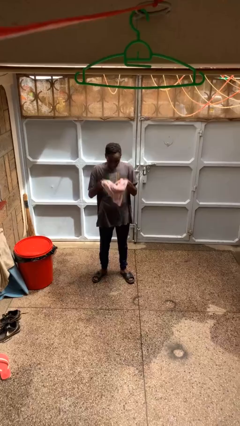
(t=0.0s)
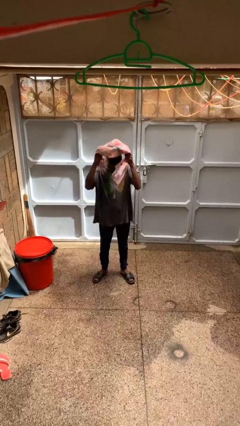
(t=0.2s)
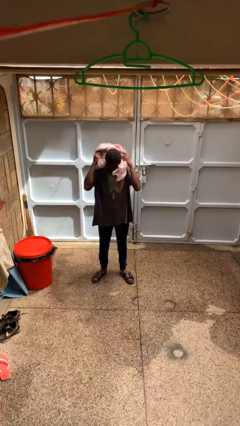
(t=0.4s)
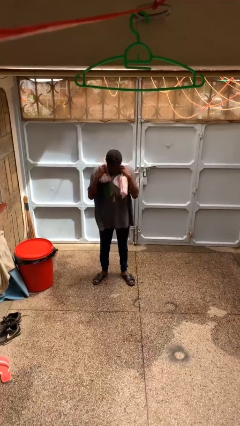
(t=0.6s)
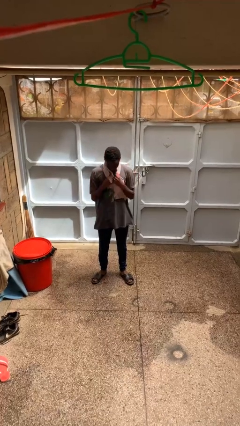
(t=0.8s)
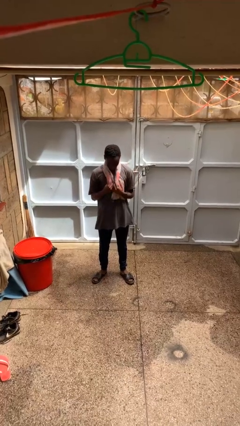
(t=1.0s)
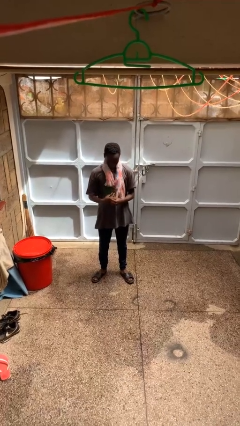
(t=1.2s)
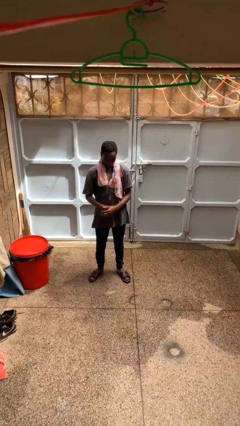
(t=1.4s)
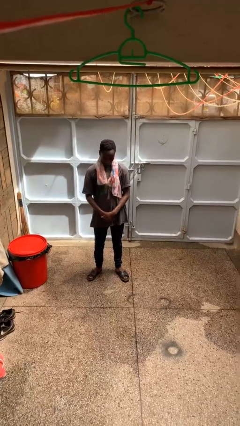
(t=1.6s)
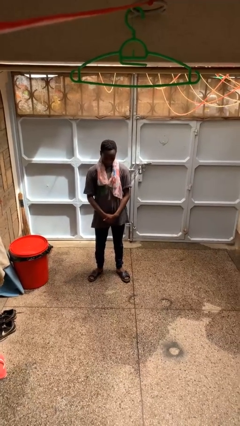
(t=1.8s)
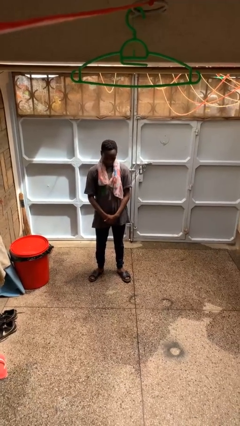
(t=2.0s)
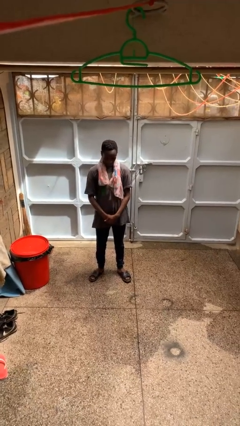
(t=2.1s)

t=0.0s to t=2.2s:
person puts on scarf

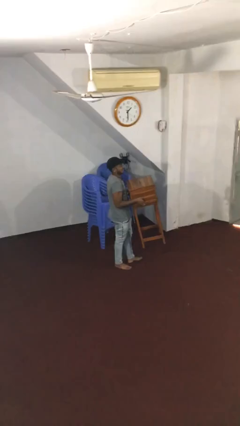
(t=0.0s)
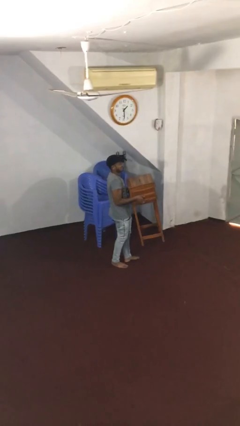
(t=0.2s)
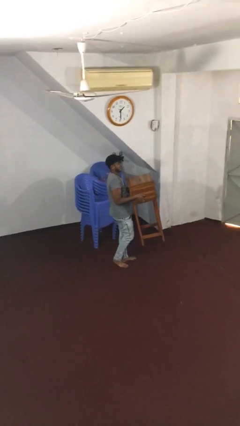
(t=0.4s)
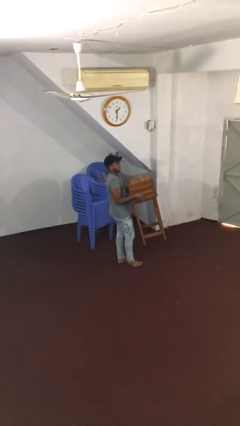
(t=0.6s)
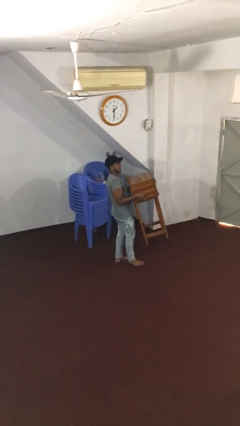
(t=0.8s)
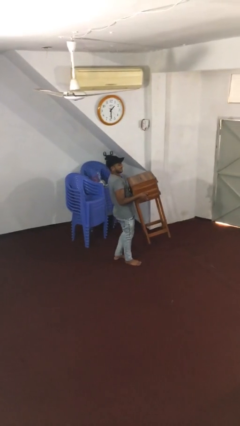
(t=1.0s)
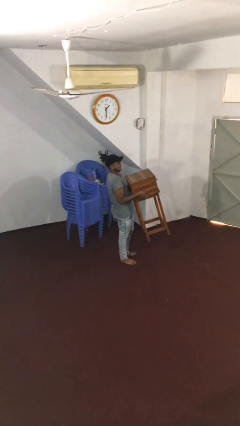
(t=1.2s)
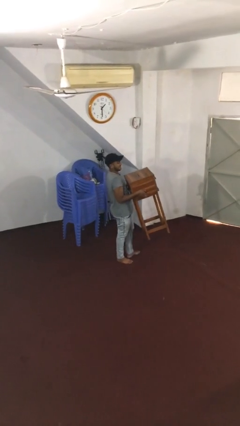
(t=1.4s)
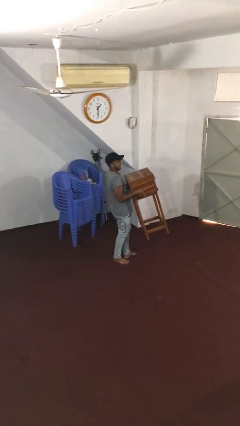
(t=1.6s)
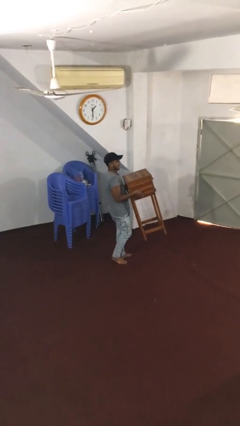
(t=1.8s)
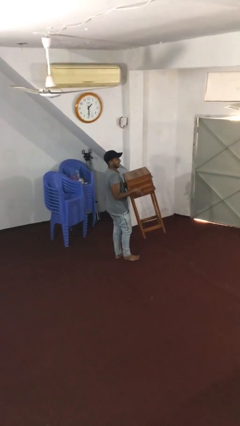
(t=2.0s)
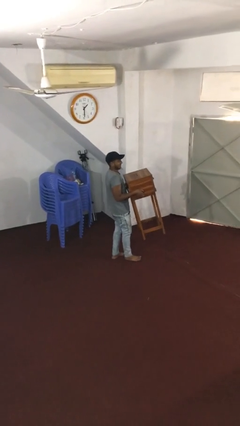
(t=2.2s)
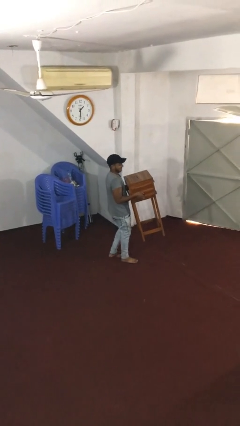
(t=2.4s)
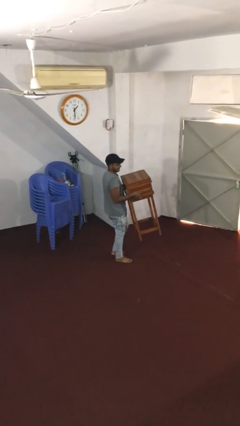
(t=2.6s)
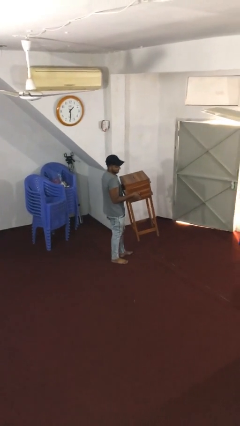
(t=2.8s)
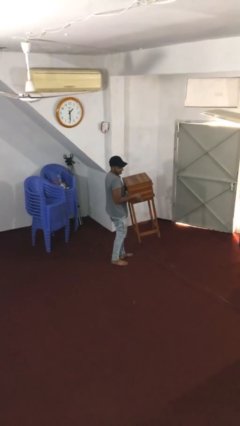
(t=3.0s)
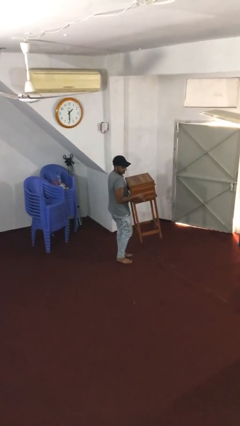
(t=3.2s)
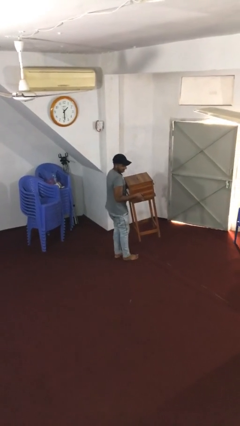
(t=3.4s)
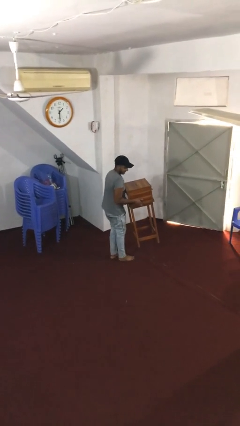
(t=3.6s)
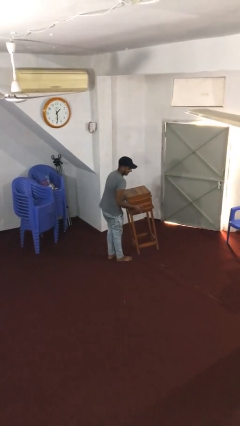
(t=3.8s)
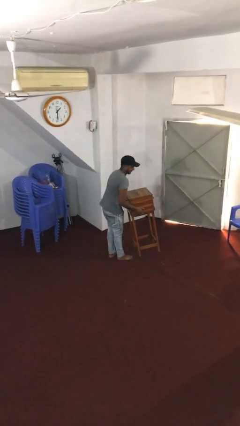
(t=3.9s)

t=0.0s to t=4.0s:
person carries heavy object

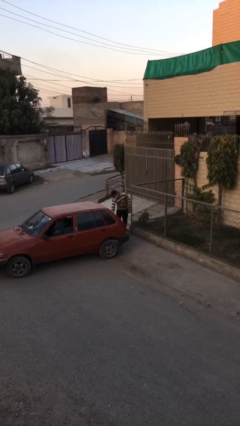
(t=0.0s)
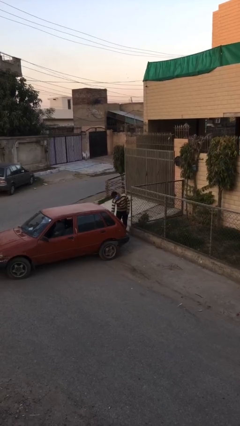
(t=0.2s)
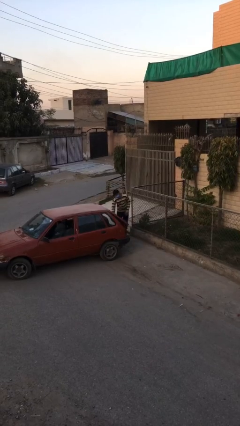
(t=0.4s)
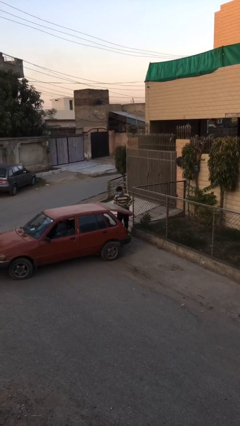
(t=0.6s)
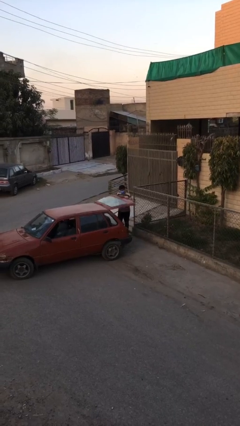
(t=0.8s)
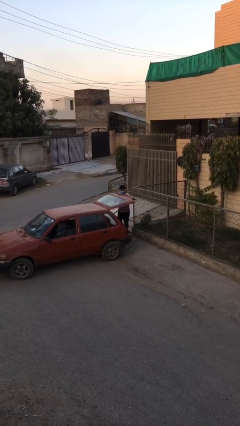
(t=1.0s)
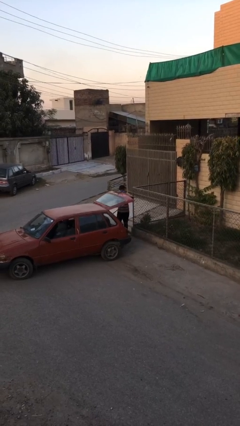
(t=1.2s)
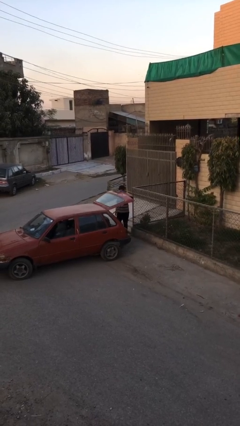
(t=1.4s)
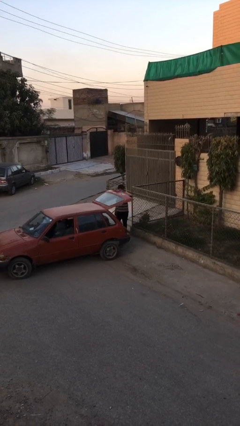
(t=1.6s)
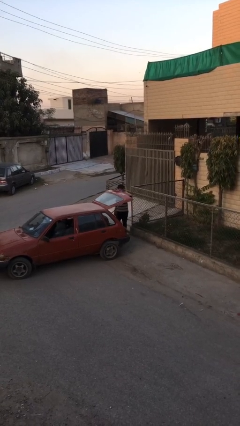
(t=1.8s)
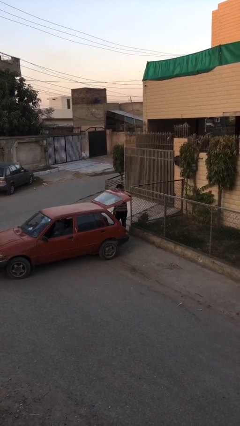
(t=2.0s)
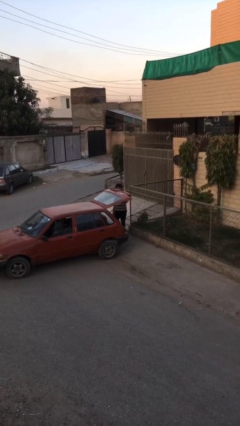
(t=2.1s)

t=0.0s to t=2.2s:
person opens car trunk

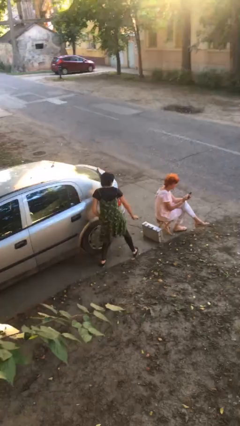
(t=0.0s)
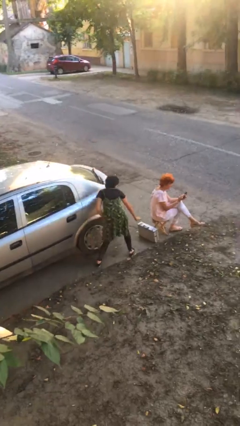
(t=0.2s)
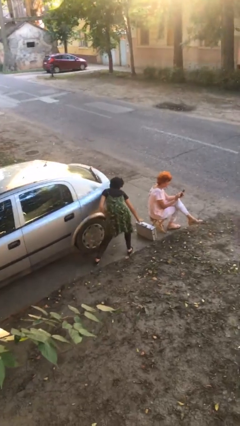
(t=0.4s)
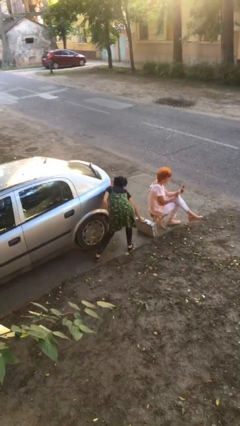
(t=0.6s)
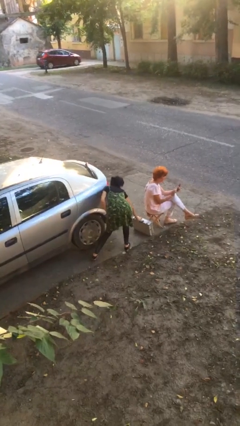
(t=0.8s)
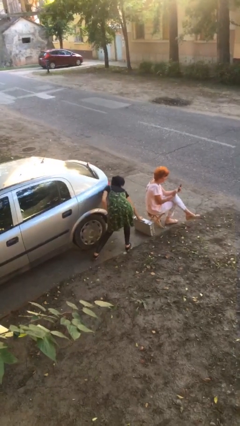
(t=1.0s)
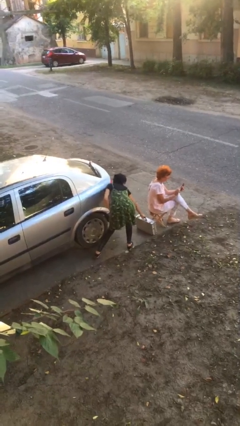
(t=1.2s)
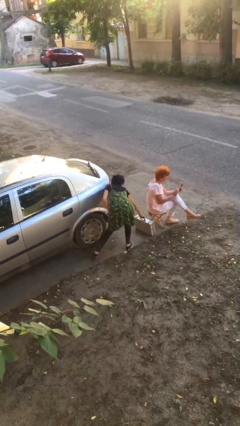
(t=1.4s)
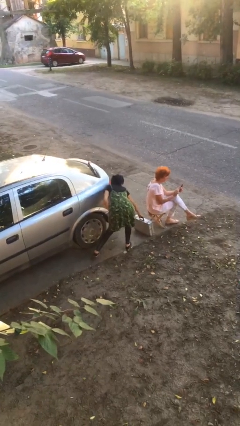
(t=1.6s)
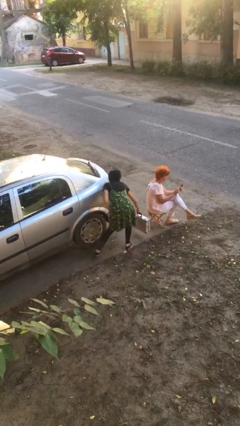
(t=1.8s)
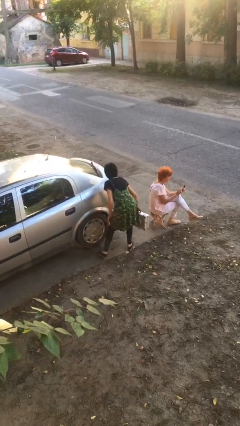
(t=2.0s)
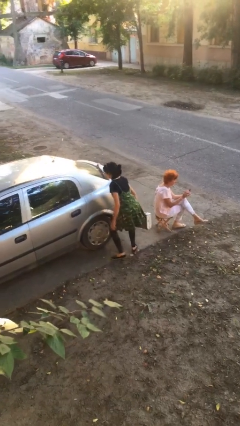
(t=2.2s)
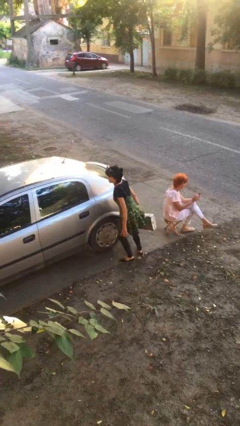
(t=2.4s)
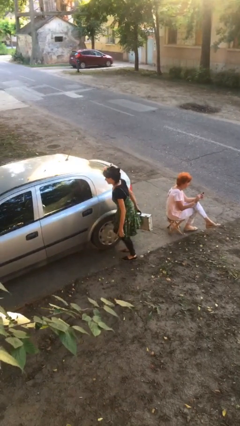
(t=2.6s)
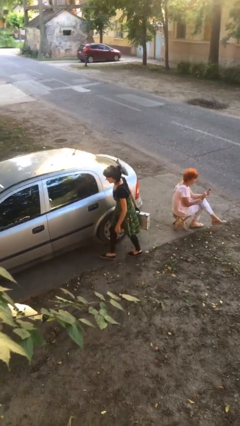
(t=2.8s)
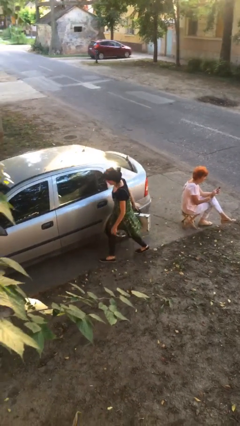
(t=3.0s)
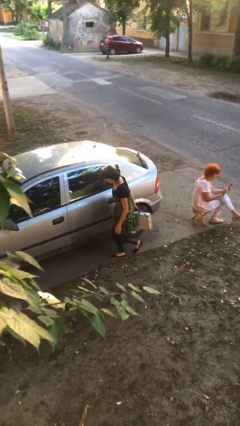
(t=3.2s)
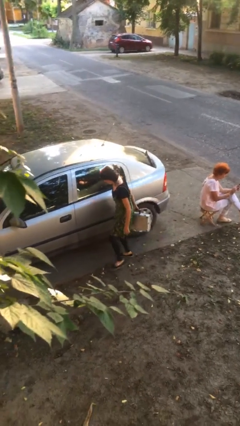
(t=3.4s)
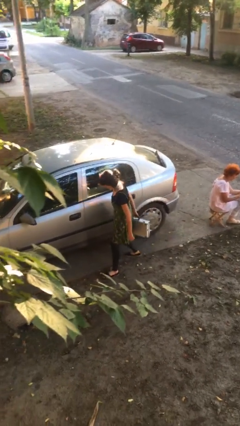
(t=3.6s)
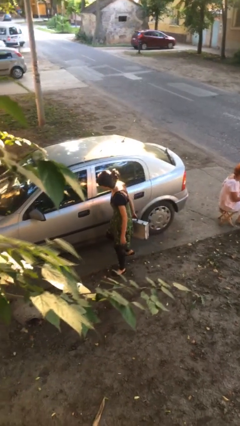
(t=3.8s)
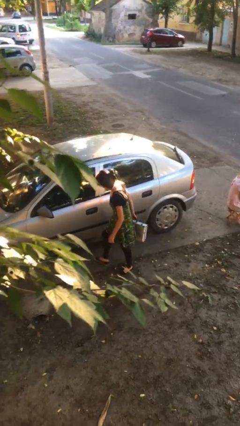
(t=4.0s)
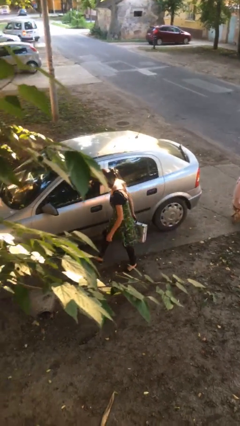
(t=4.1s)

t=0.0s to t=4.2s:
person steals object from person

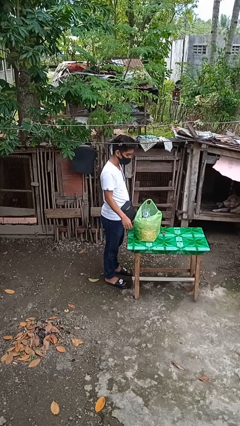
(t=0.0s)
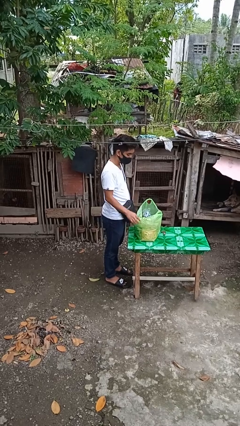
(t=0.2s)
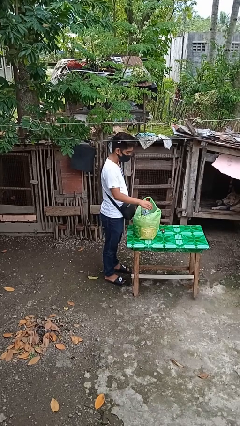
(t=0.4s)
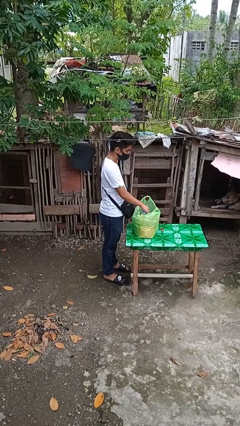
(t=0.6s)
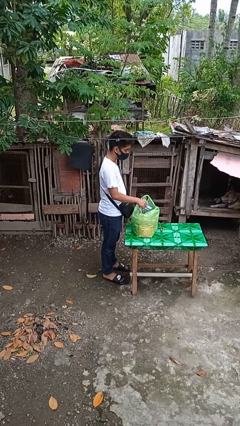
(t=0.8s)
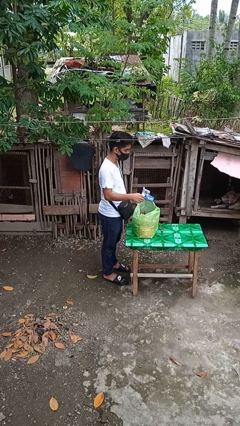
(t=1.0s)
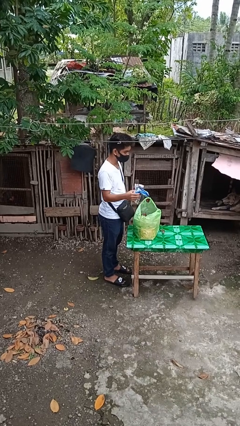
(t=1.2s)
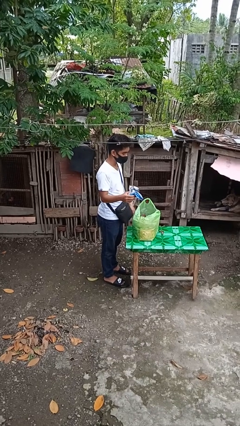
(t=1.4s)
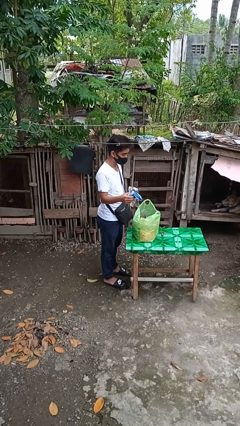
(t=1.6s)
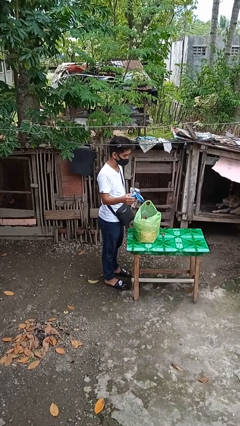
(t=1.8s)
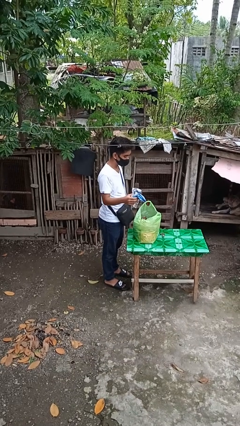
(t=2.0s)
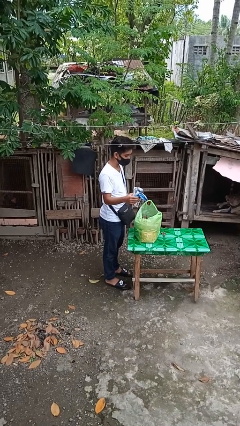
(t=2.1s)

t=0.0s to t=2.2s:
person takes object from bag

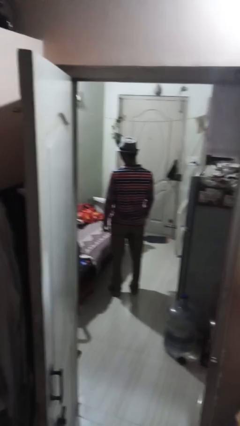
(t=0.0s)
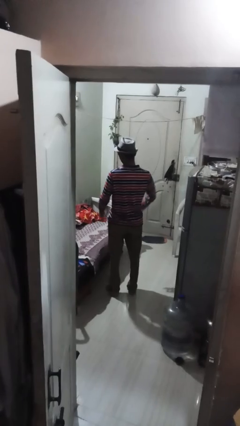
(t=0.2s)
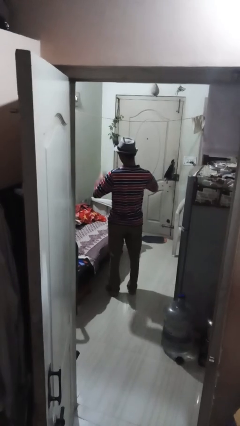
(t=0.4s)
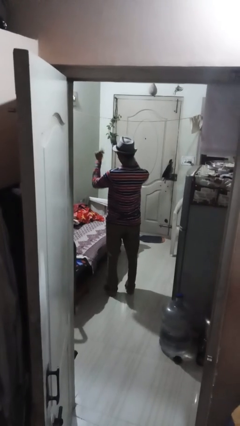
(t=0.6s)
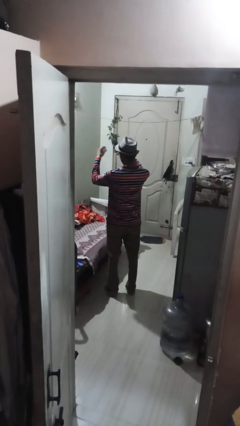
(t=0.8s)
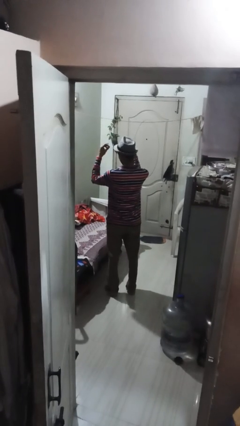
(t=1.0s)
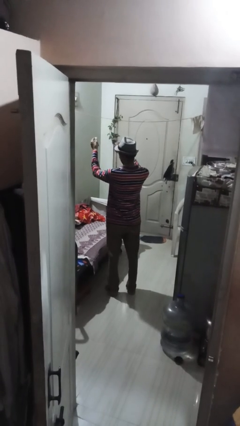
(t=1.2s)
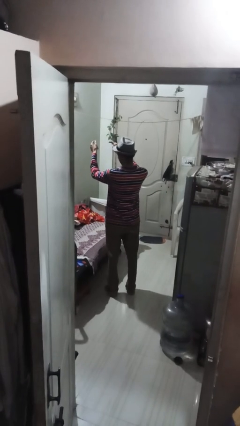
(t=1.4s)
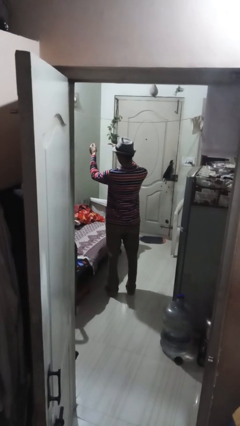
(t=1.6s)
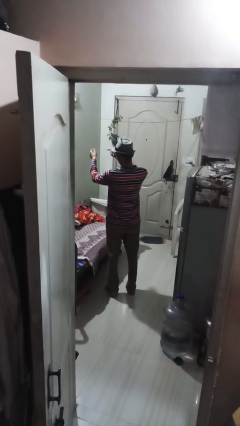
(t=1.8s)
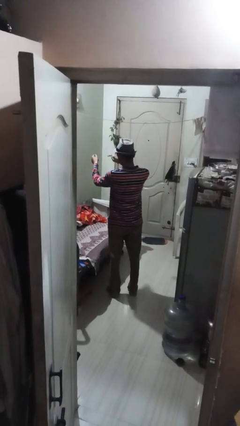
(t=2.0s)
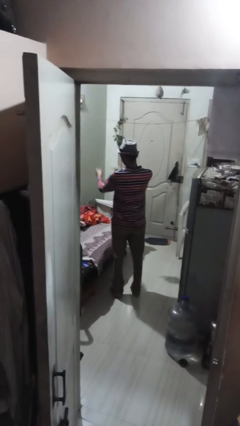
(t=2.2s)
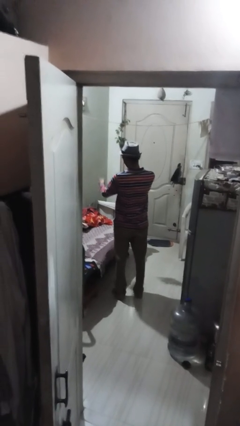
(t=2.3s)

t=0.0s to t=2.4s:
person snaps fingers
